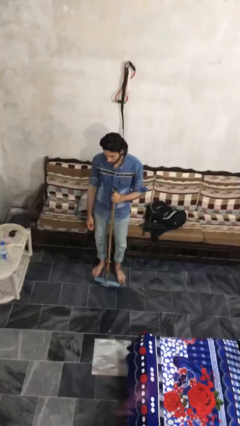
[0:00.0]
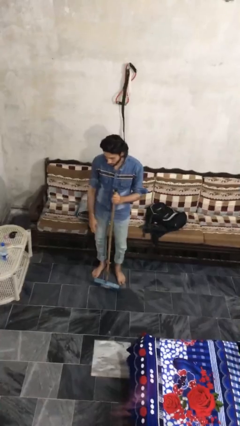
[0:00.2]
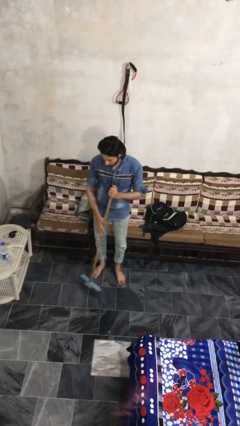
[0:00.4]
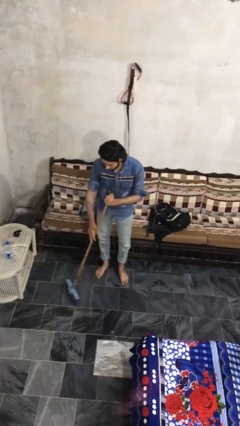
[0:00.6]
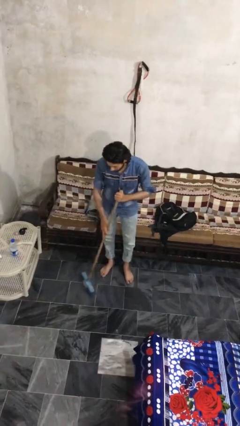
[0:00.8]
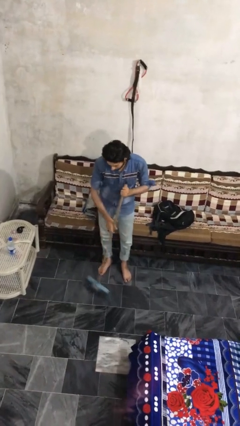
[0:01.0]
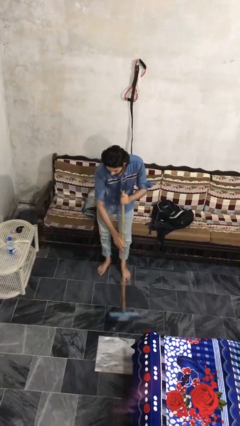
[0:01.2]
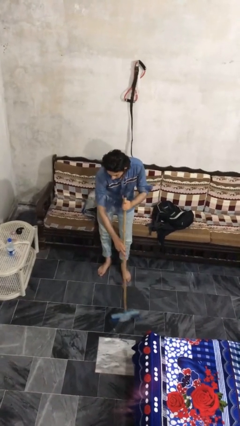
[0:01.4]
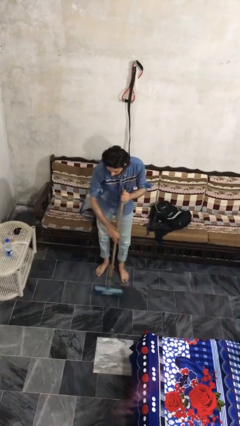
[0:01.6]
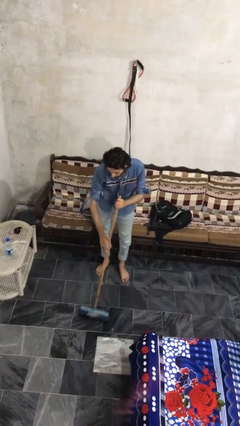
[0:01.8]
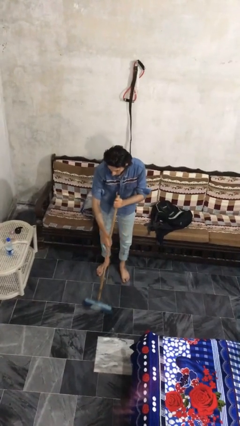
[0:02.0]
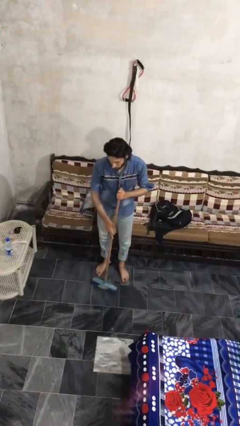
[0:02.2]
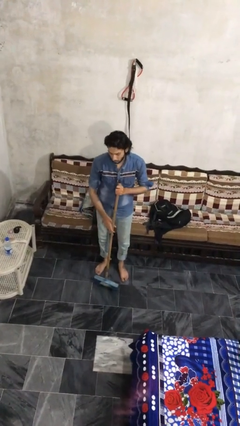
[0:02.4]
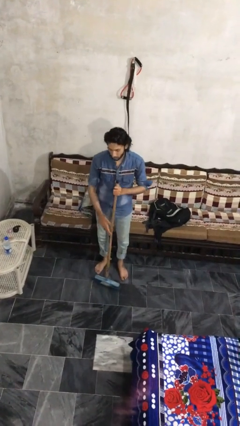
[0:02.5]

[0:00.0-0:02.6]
person sweeps floor

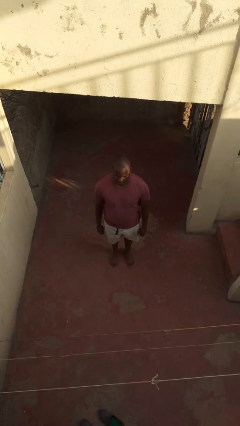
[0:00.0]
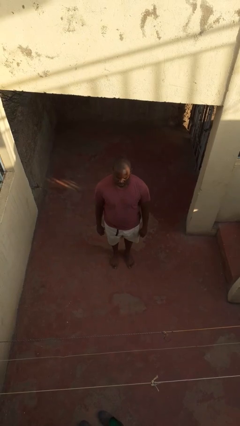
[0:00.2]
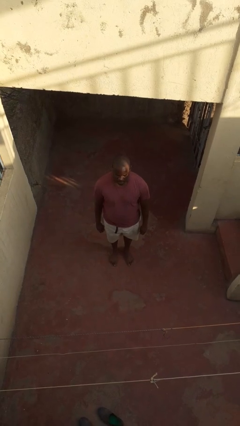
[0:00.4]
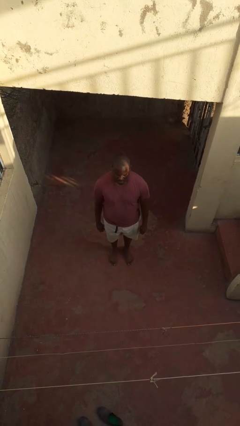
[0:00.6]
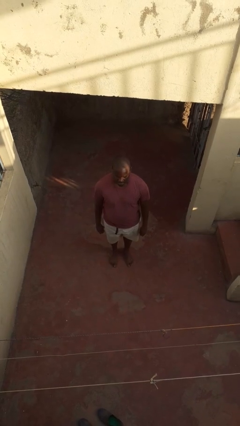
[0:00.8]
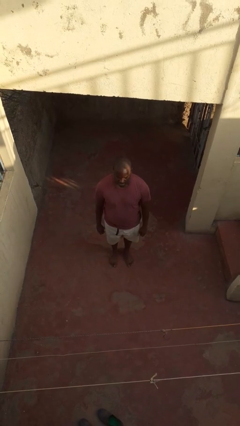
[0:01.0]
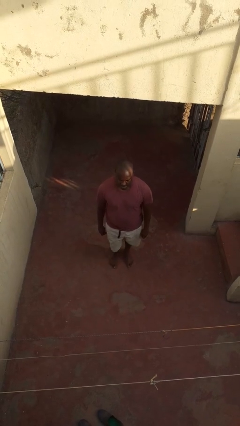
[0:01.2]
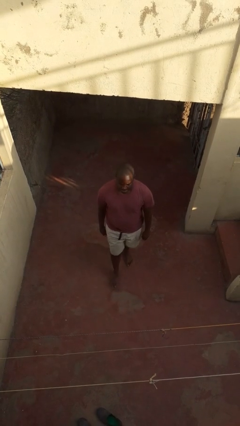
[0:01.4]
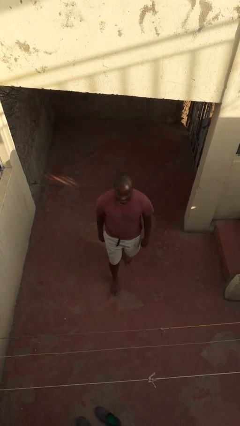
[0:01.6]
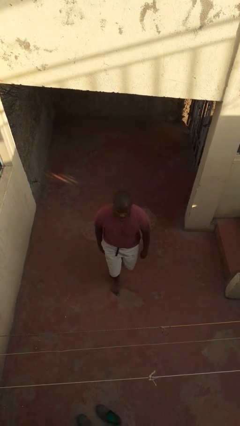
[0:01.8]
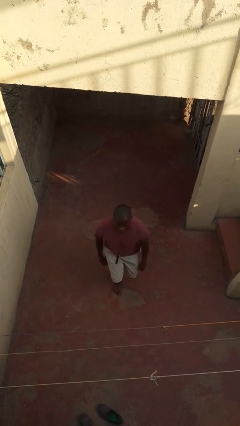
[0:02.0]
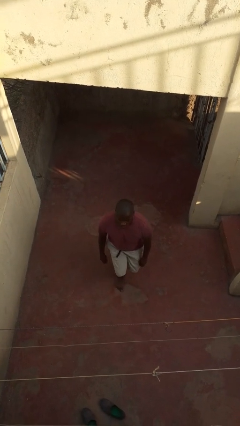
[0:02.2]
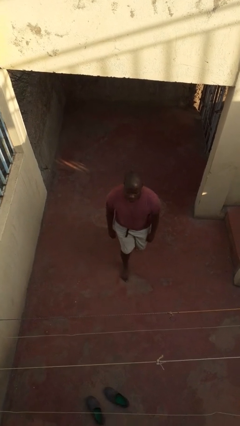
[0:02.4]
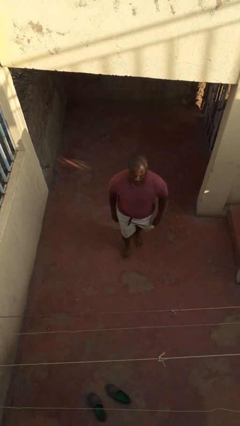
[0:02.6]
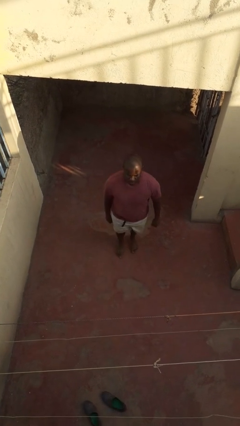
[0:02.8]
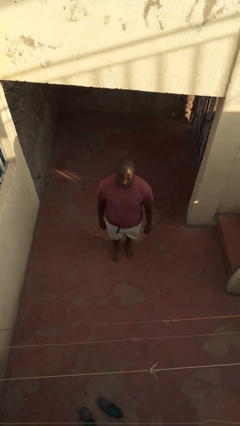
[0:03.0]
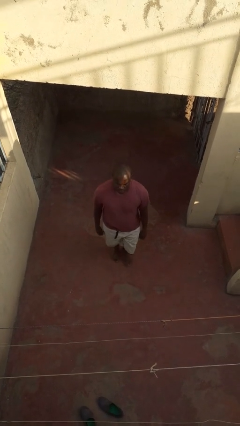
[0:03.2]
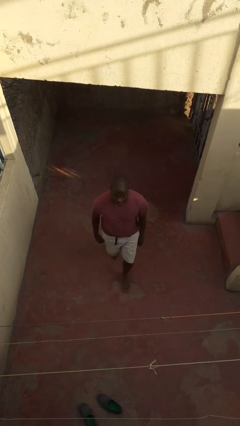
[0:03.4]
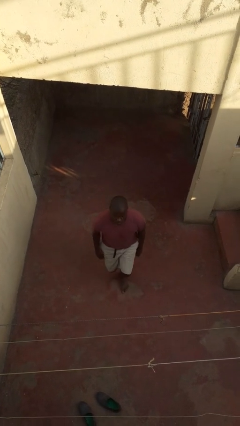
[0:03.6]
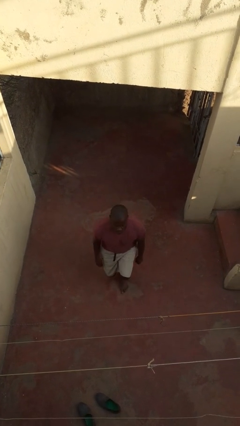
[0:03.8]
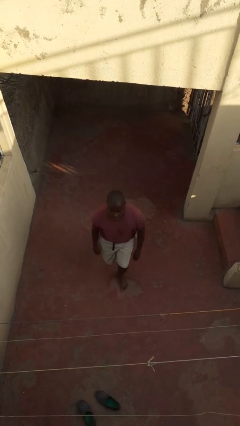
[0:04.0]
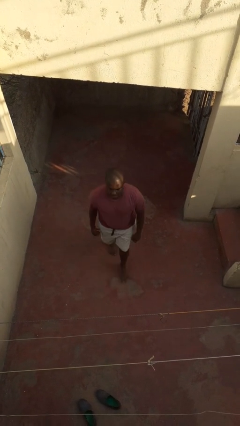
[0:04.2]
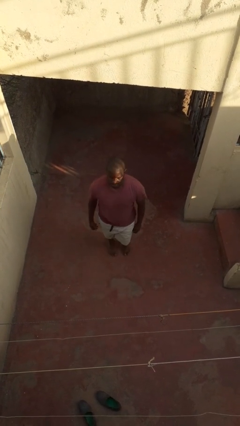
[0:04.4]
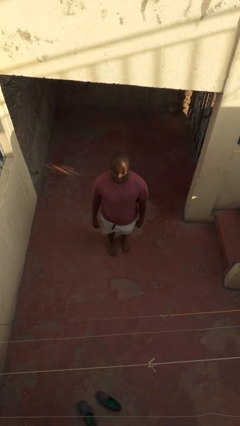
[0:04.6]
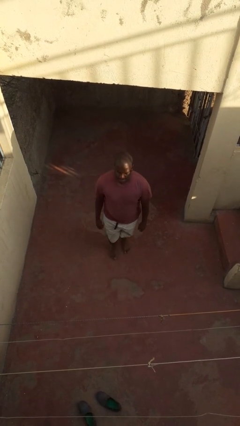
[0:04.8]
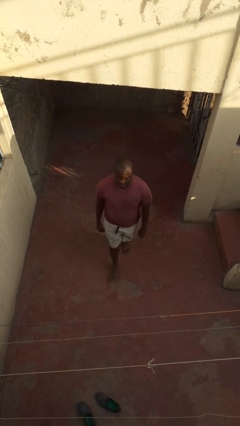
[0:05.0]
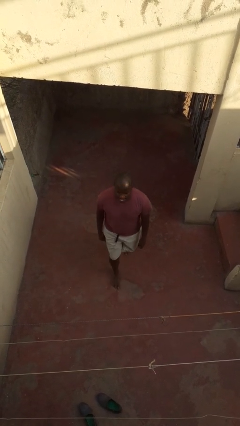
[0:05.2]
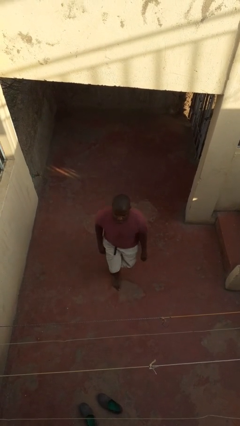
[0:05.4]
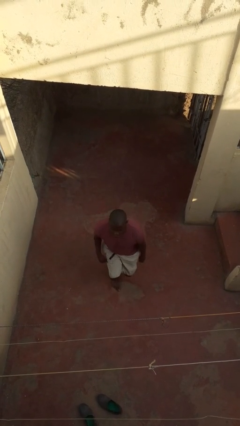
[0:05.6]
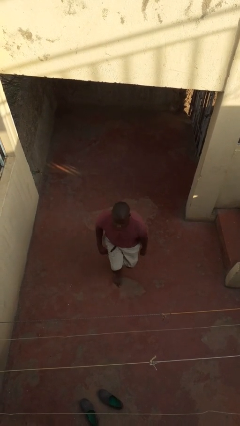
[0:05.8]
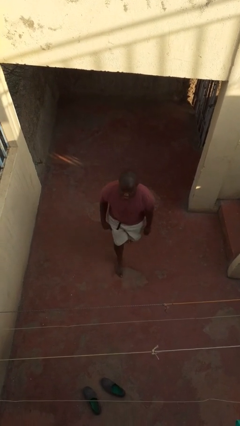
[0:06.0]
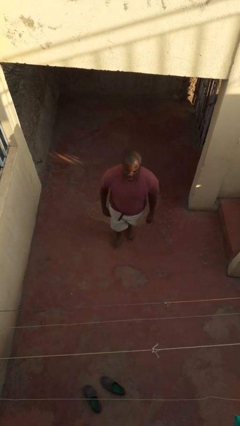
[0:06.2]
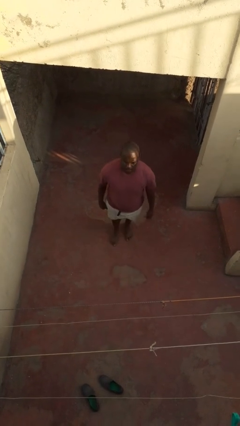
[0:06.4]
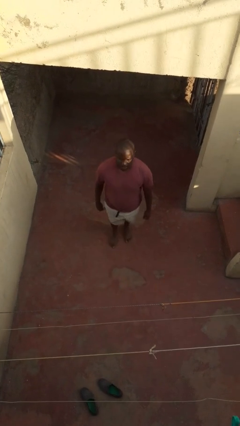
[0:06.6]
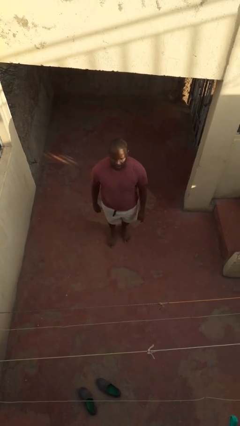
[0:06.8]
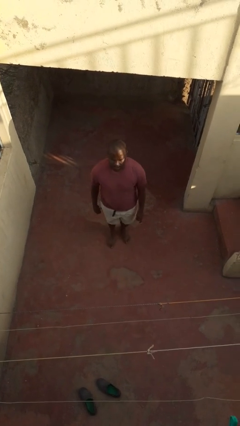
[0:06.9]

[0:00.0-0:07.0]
person exercises with lunges

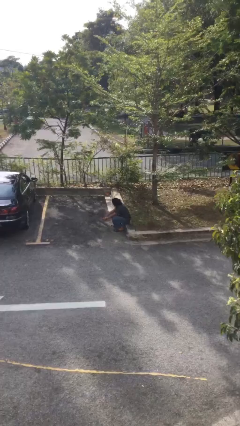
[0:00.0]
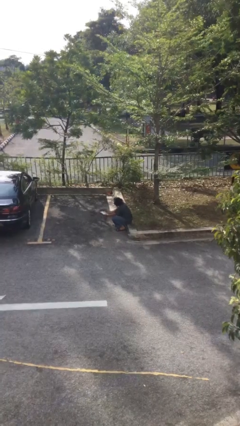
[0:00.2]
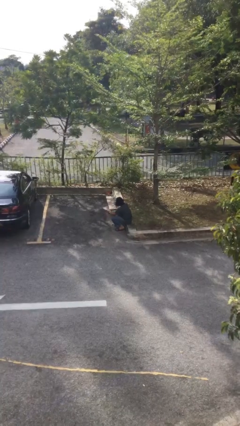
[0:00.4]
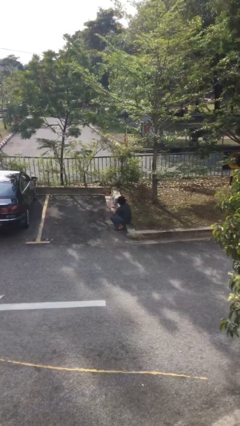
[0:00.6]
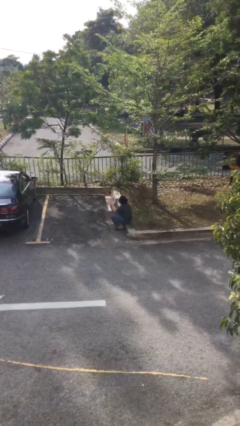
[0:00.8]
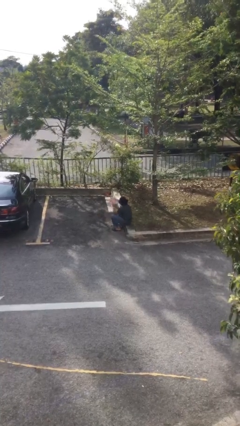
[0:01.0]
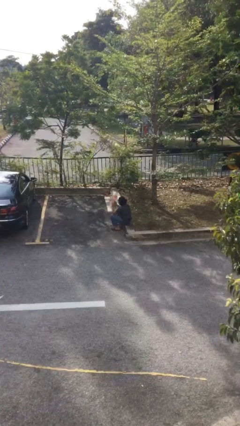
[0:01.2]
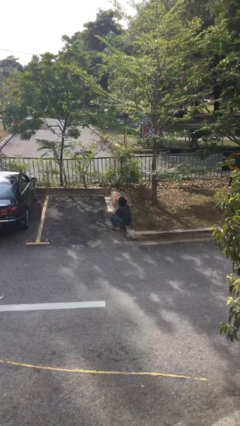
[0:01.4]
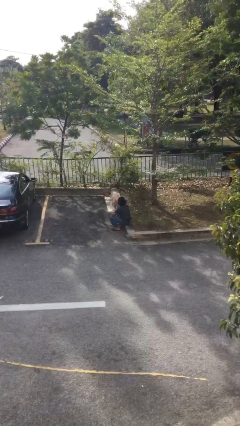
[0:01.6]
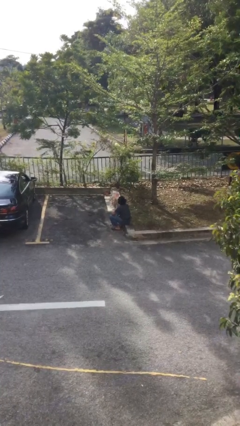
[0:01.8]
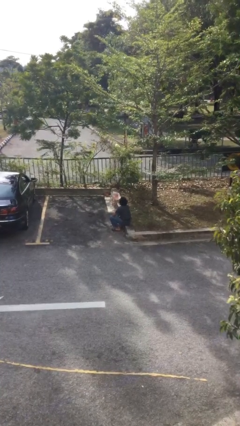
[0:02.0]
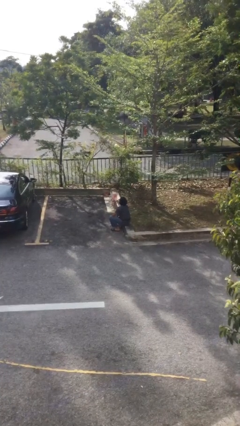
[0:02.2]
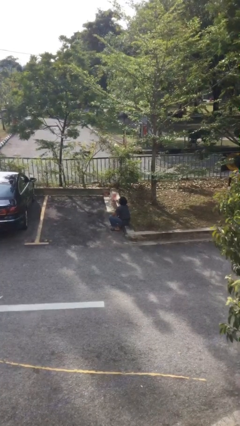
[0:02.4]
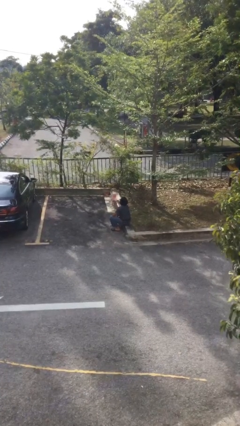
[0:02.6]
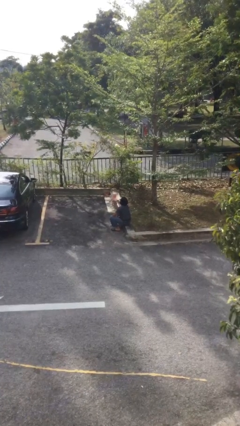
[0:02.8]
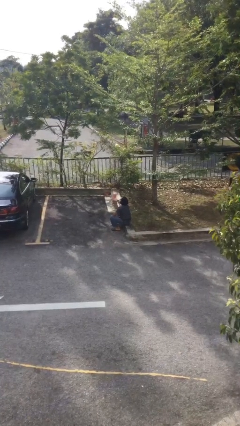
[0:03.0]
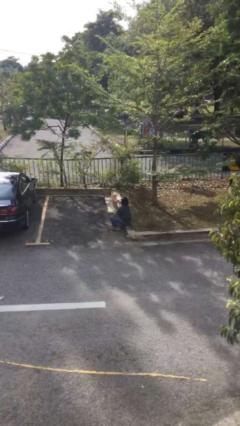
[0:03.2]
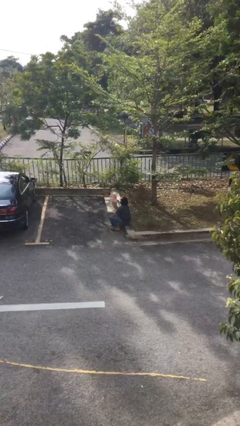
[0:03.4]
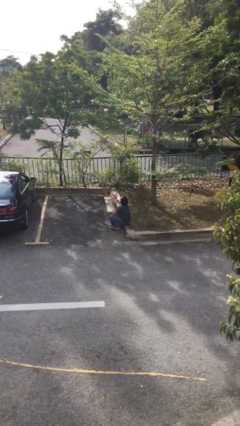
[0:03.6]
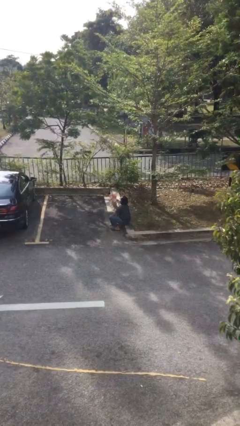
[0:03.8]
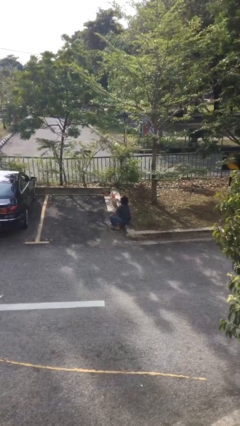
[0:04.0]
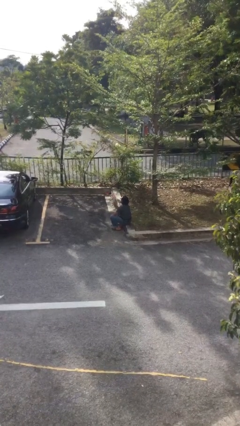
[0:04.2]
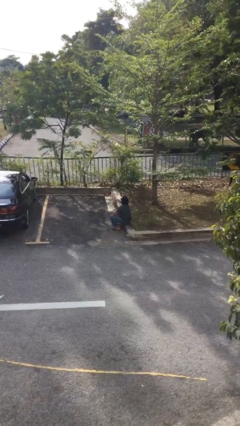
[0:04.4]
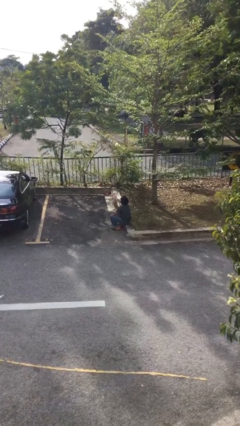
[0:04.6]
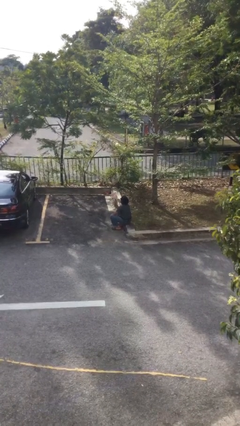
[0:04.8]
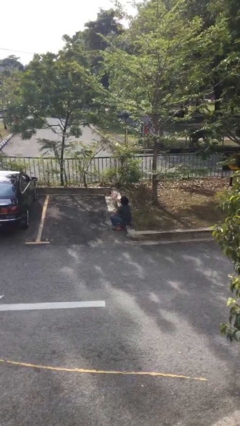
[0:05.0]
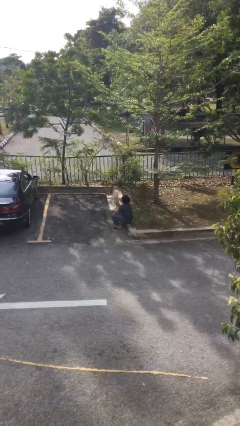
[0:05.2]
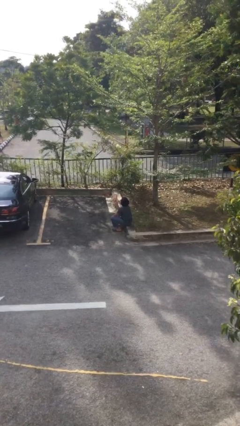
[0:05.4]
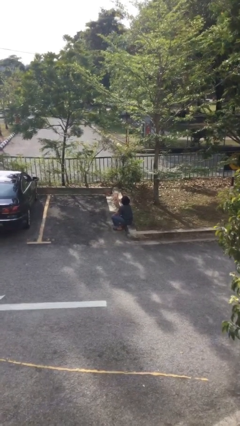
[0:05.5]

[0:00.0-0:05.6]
person reads document

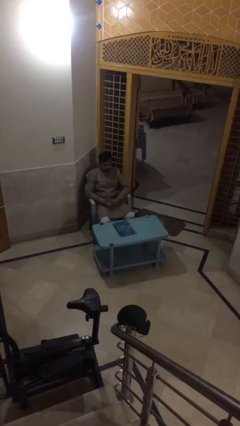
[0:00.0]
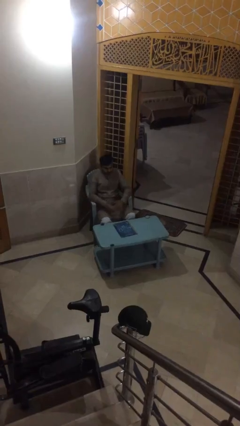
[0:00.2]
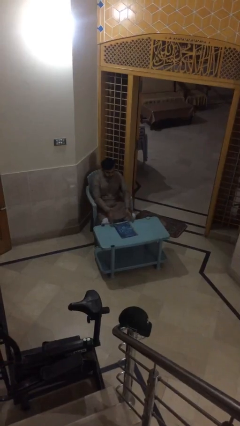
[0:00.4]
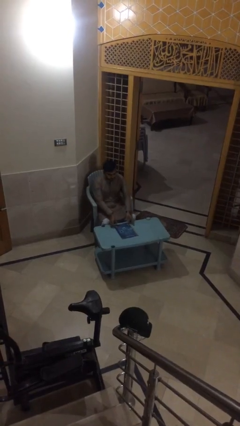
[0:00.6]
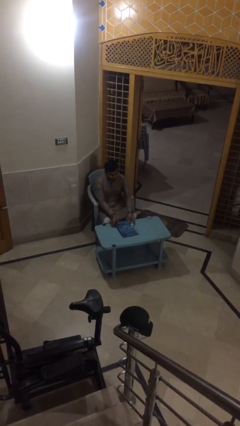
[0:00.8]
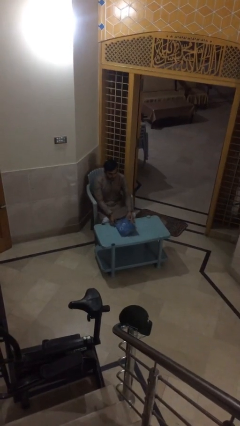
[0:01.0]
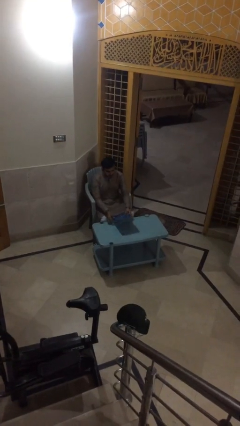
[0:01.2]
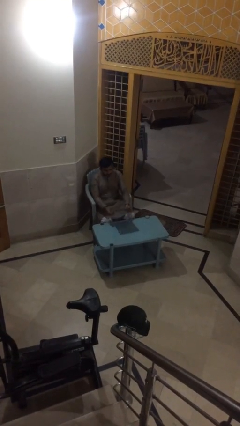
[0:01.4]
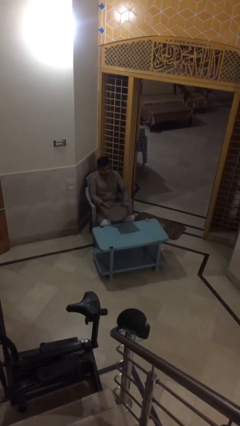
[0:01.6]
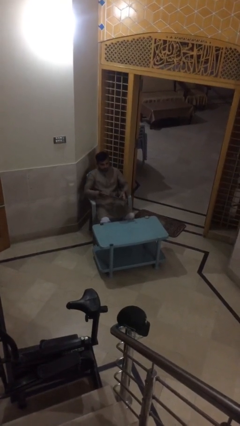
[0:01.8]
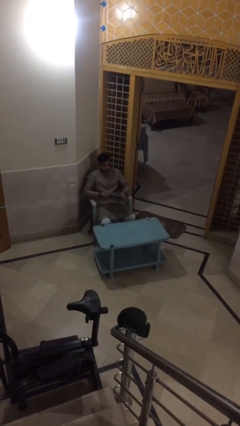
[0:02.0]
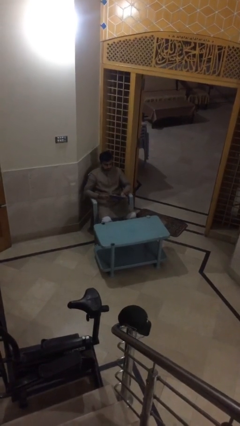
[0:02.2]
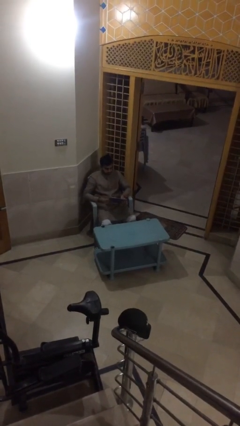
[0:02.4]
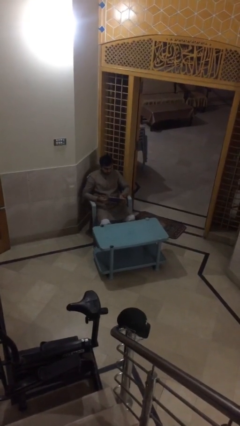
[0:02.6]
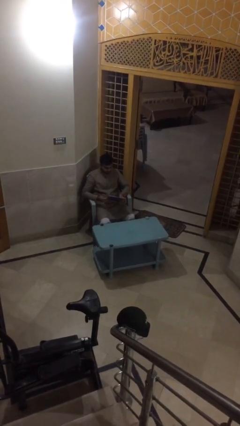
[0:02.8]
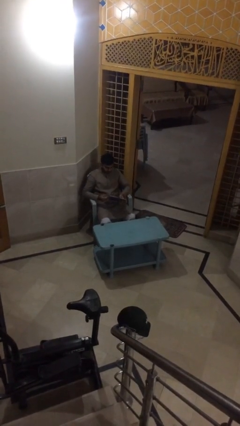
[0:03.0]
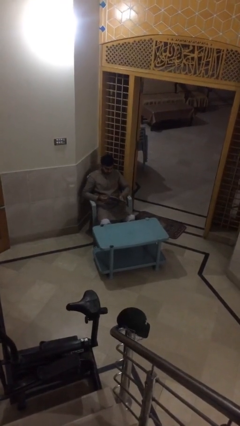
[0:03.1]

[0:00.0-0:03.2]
person picks up object from table
